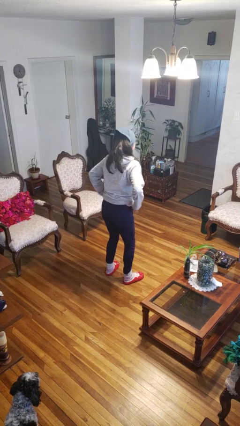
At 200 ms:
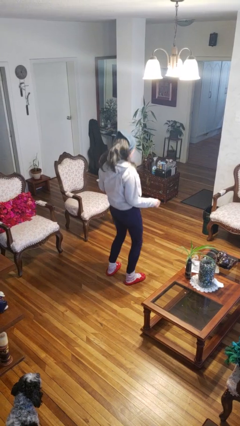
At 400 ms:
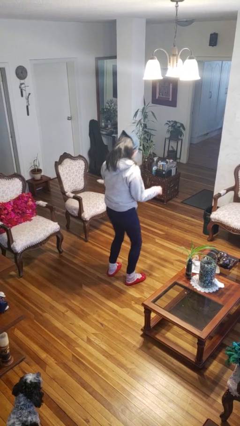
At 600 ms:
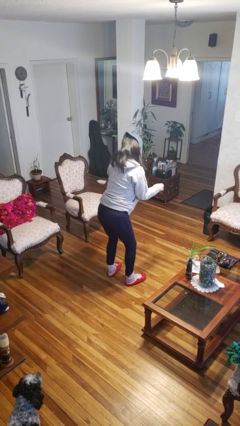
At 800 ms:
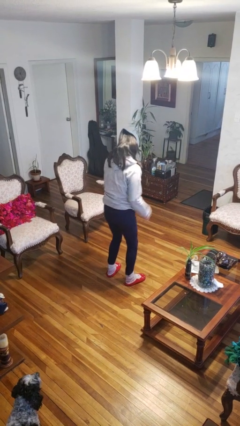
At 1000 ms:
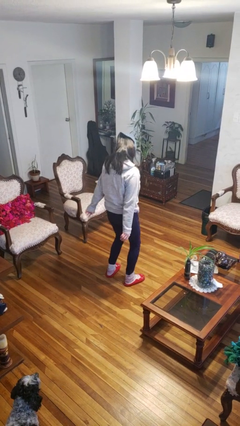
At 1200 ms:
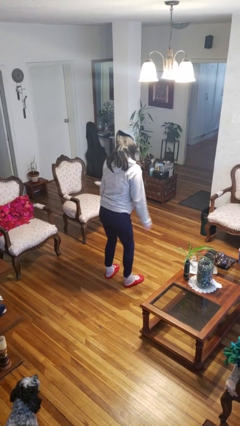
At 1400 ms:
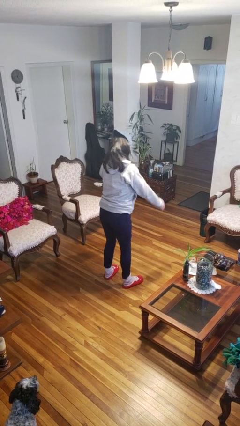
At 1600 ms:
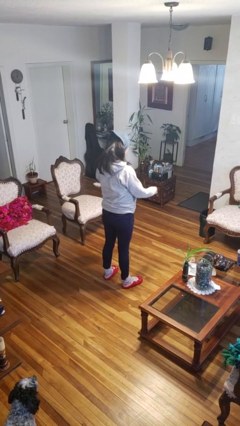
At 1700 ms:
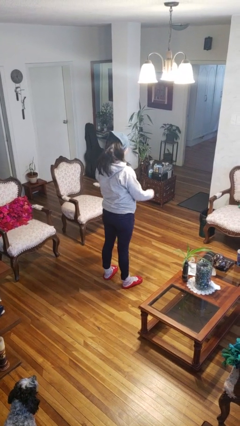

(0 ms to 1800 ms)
person wiggles hips

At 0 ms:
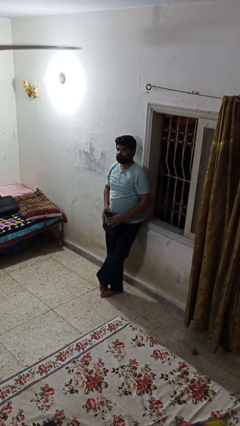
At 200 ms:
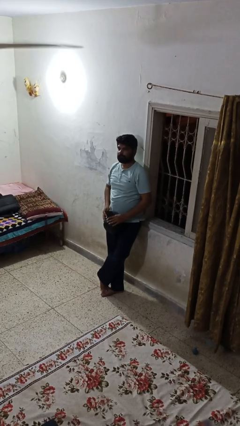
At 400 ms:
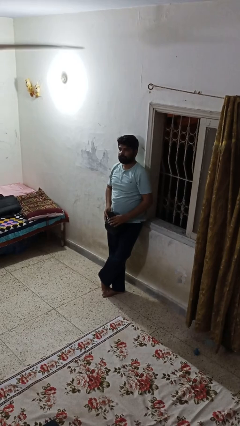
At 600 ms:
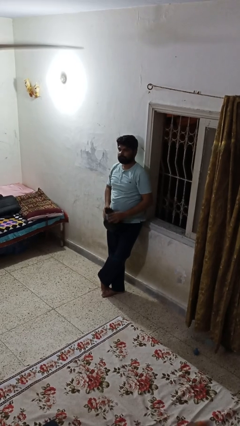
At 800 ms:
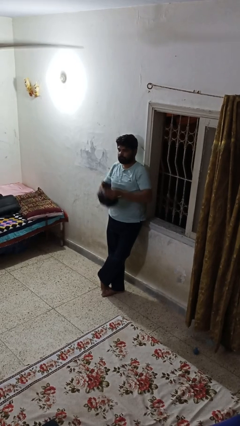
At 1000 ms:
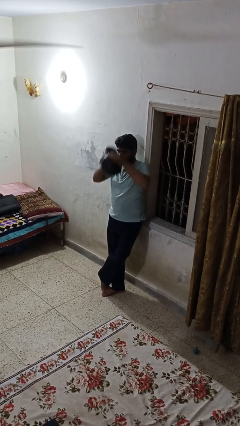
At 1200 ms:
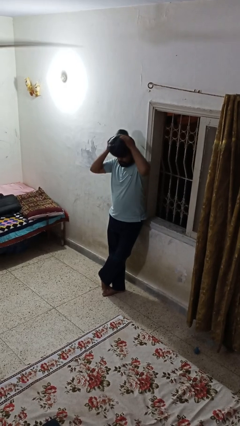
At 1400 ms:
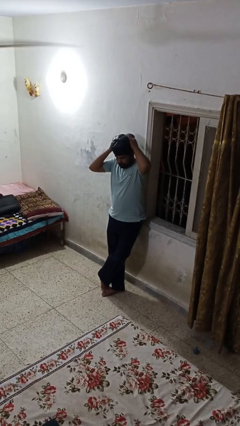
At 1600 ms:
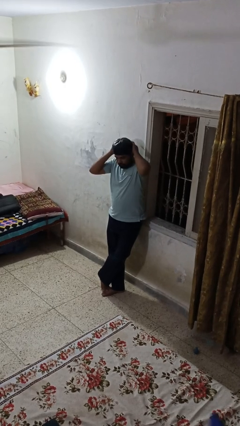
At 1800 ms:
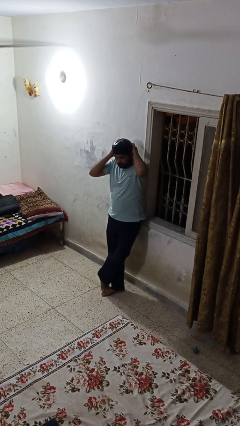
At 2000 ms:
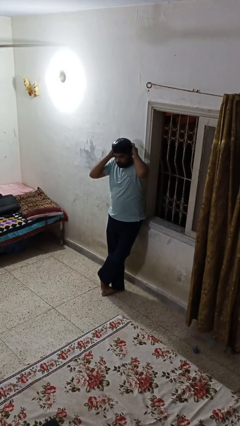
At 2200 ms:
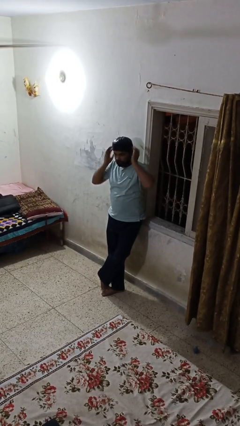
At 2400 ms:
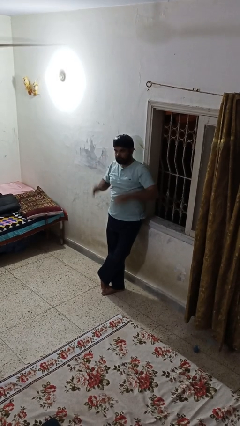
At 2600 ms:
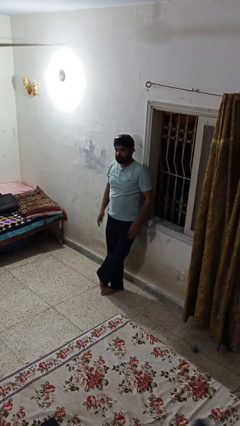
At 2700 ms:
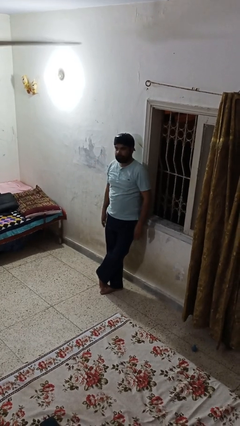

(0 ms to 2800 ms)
person puts on hat

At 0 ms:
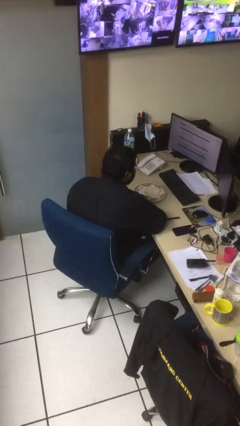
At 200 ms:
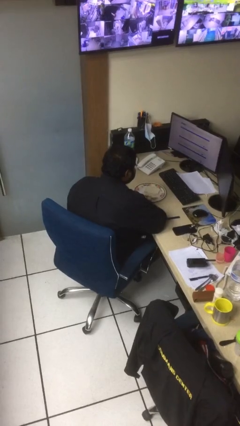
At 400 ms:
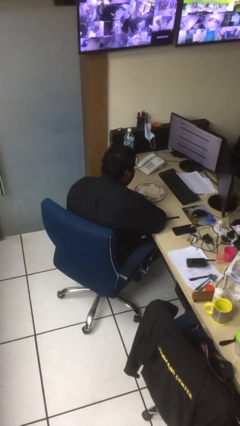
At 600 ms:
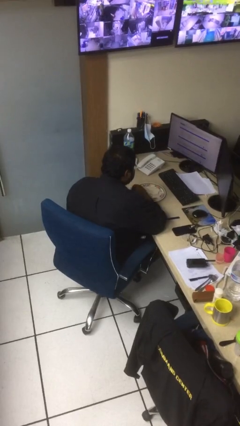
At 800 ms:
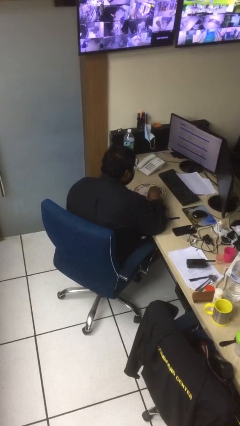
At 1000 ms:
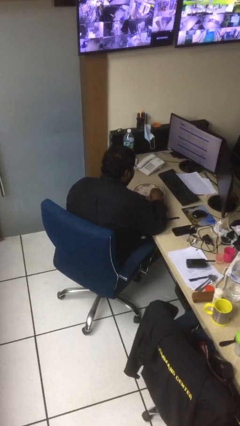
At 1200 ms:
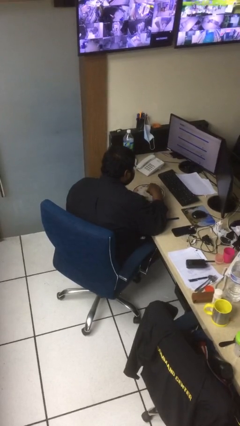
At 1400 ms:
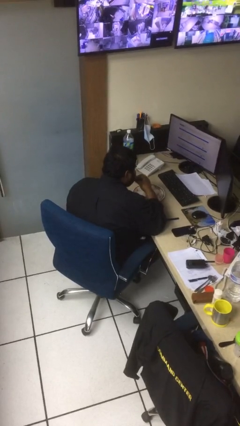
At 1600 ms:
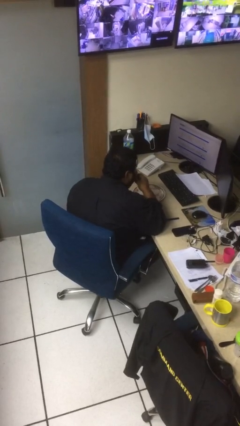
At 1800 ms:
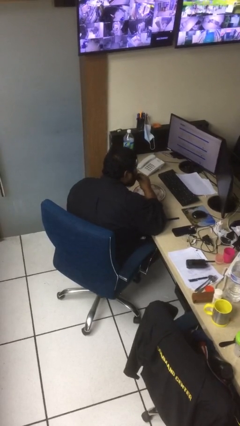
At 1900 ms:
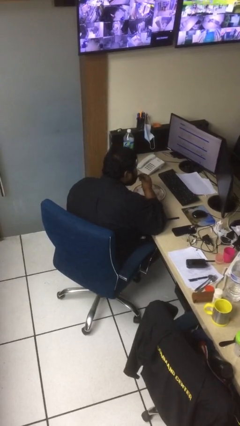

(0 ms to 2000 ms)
person eats with hands

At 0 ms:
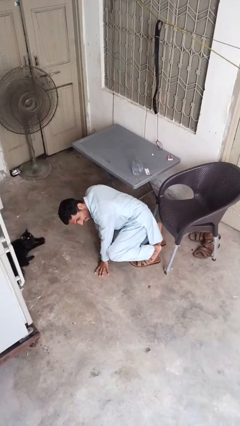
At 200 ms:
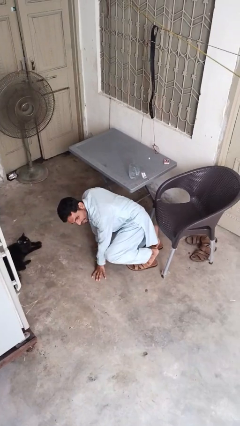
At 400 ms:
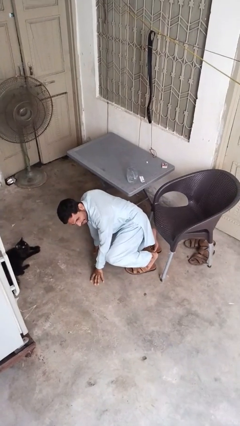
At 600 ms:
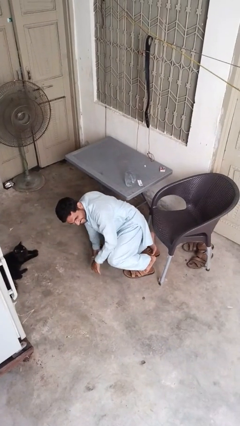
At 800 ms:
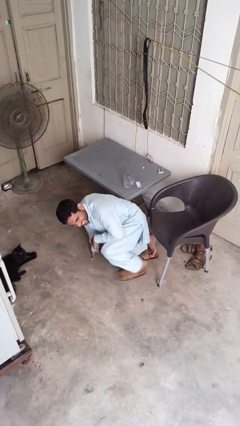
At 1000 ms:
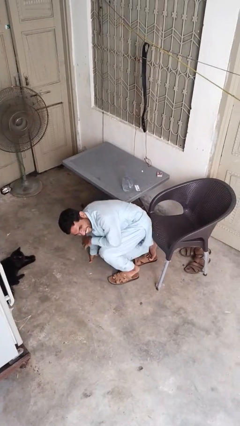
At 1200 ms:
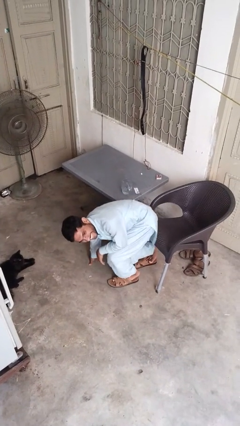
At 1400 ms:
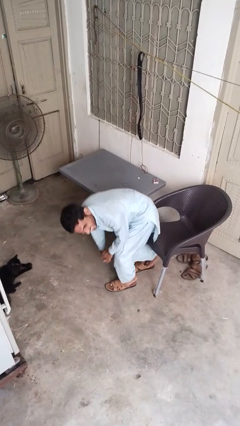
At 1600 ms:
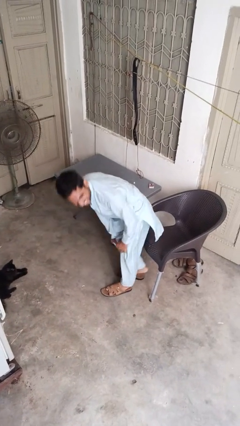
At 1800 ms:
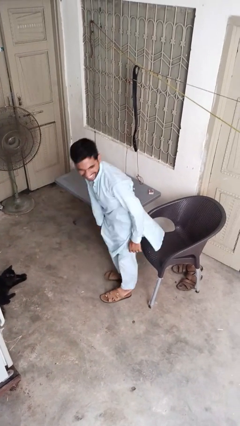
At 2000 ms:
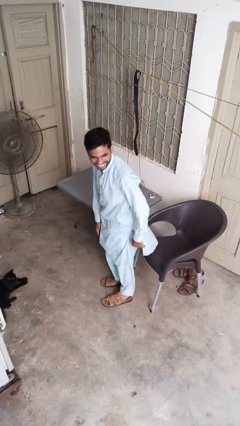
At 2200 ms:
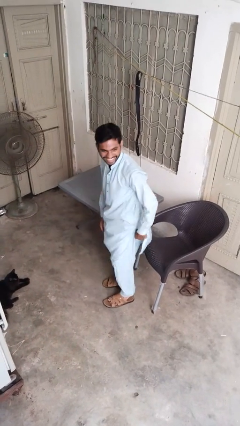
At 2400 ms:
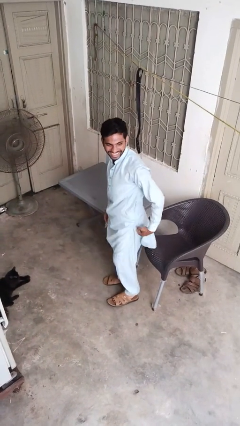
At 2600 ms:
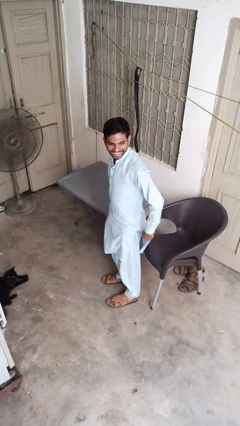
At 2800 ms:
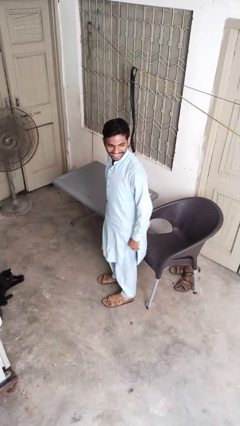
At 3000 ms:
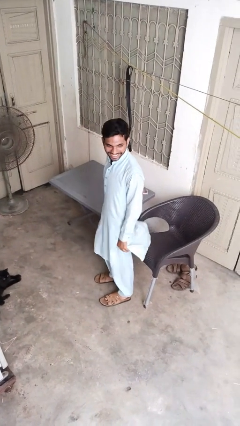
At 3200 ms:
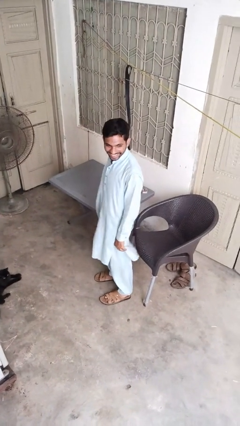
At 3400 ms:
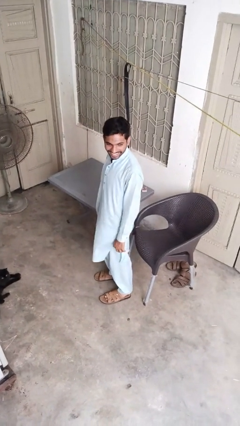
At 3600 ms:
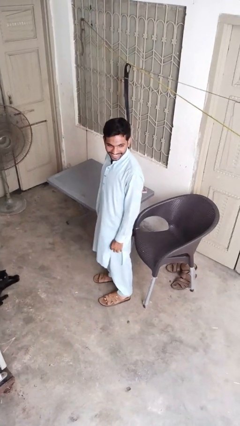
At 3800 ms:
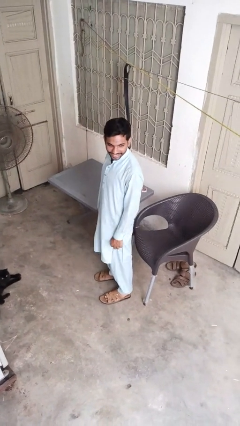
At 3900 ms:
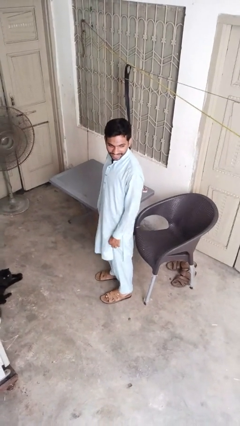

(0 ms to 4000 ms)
person stands up from floor

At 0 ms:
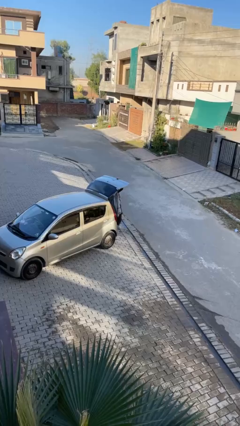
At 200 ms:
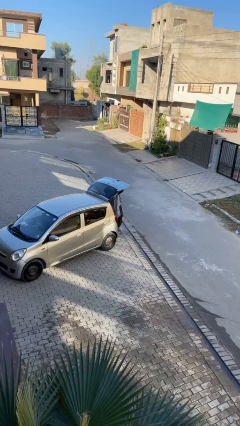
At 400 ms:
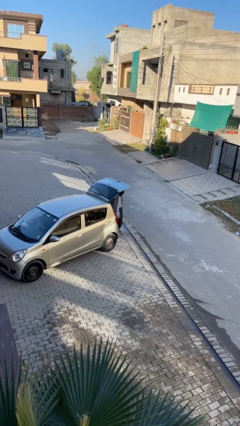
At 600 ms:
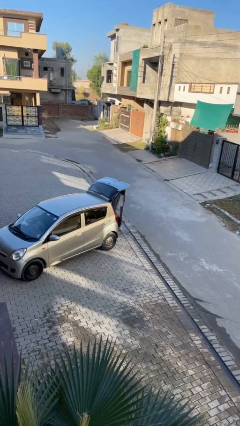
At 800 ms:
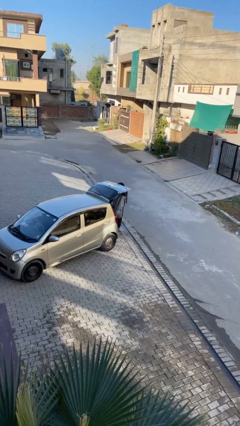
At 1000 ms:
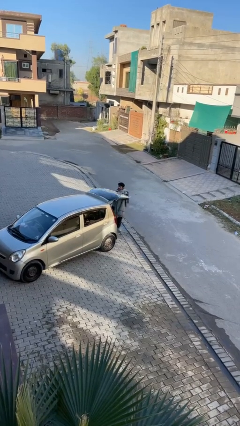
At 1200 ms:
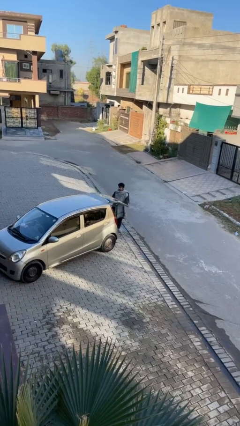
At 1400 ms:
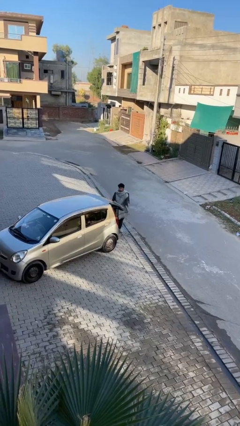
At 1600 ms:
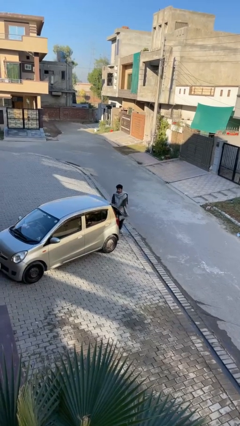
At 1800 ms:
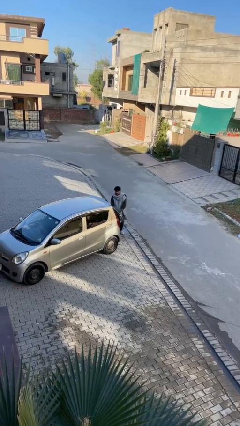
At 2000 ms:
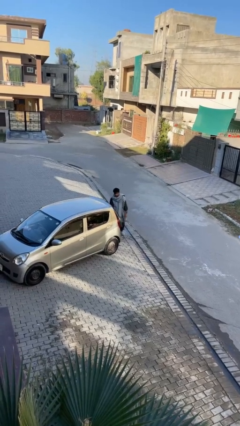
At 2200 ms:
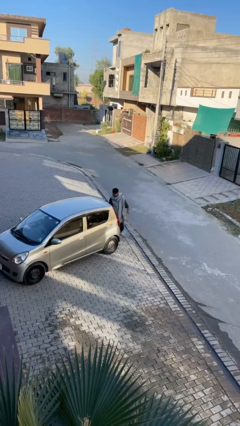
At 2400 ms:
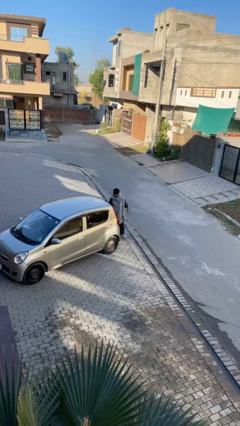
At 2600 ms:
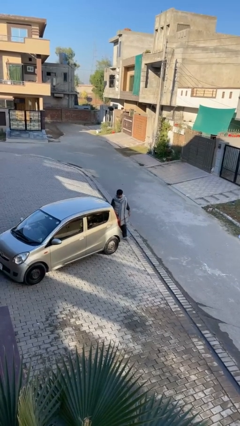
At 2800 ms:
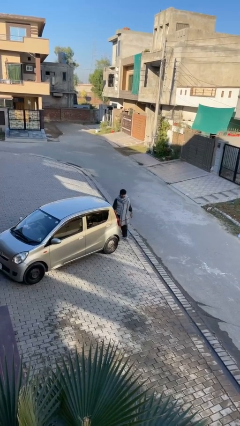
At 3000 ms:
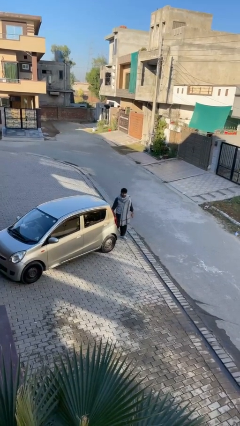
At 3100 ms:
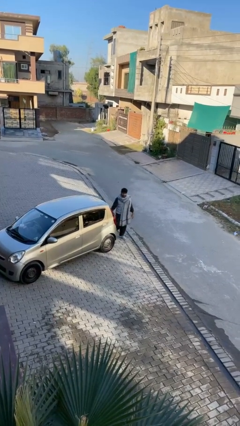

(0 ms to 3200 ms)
person closes car trunk

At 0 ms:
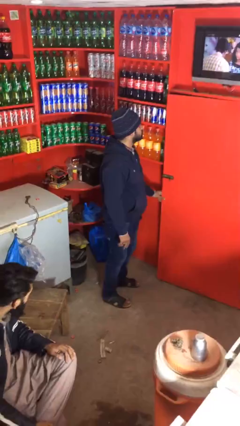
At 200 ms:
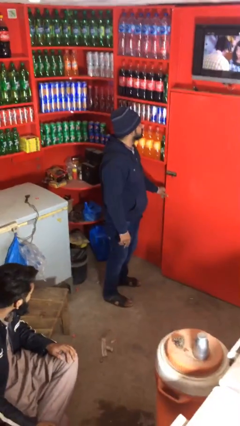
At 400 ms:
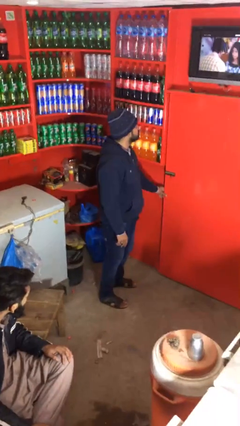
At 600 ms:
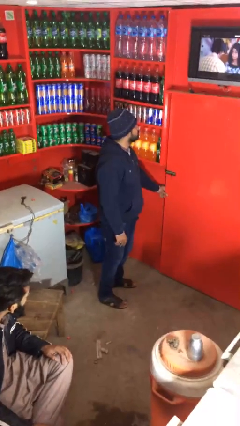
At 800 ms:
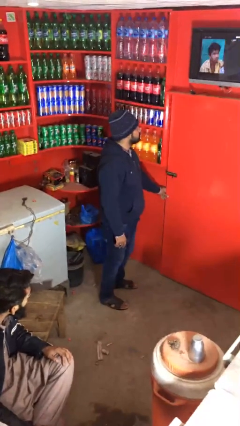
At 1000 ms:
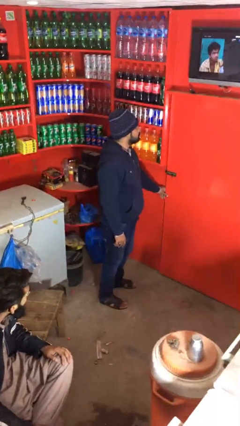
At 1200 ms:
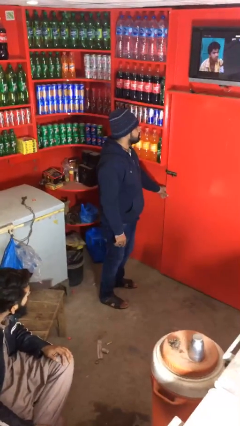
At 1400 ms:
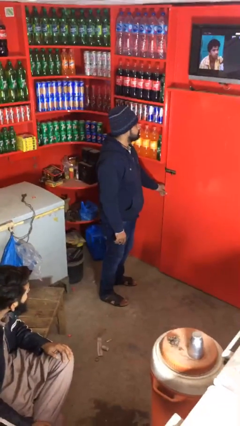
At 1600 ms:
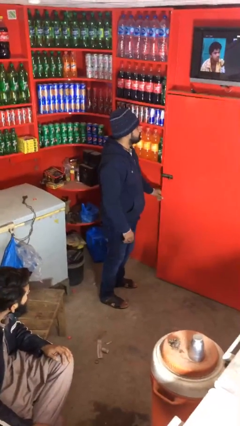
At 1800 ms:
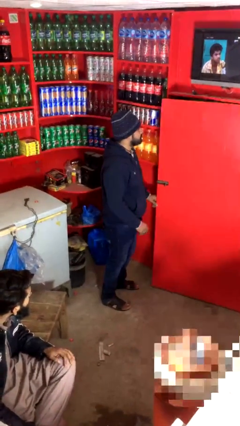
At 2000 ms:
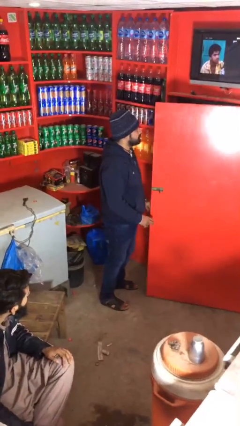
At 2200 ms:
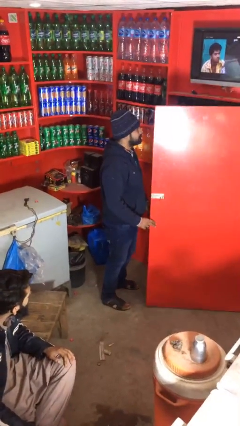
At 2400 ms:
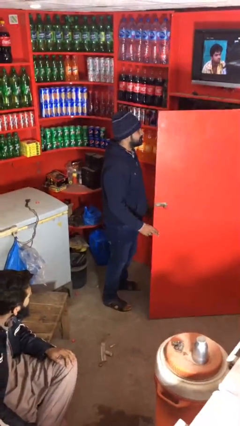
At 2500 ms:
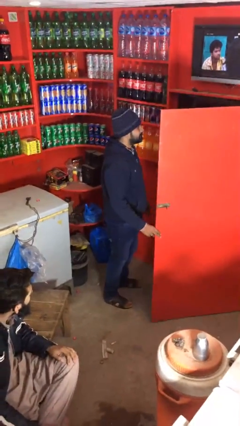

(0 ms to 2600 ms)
person opens facility door

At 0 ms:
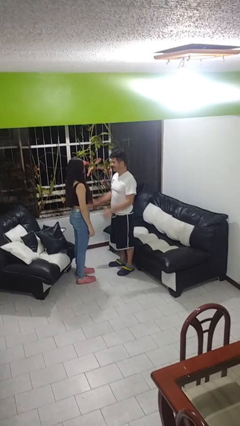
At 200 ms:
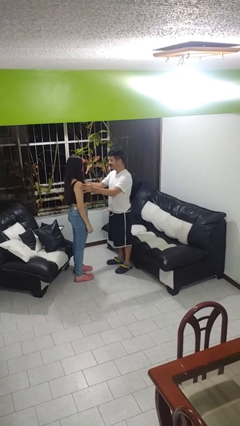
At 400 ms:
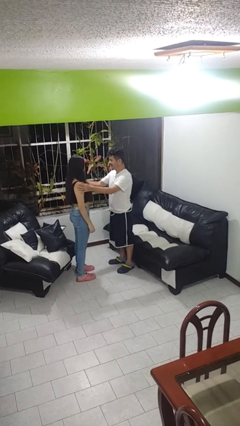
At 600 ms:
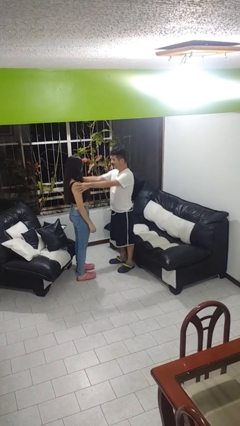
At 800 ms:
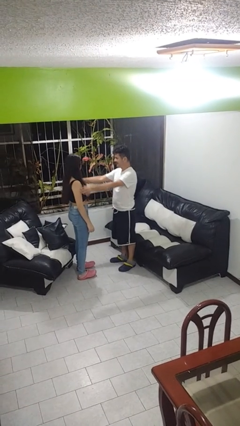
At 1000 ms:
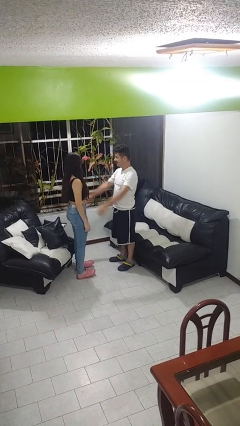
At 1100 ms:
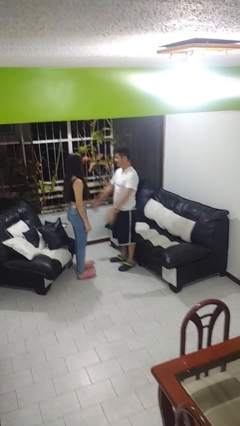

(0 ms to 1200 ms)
person shoves person
